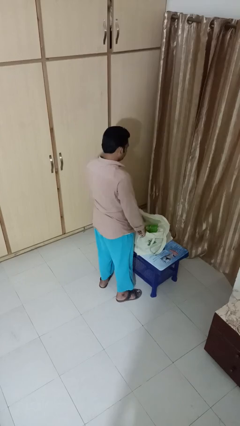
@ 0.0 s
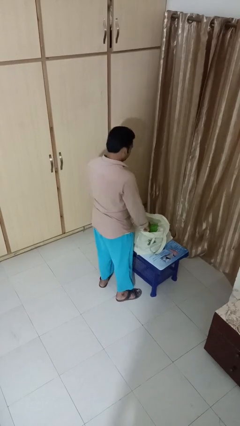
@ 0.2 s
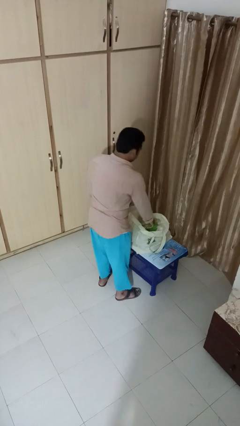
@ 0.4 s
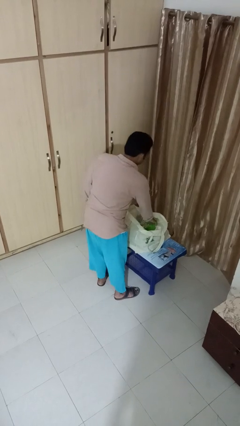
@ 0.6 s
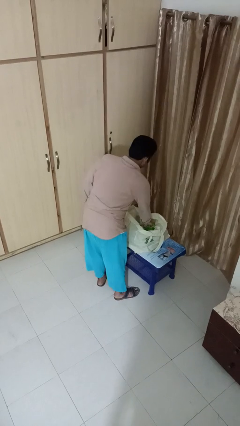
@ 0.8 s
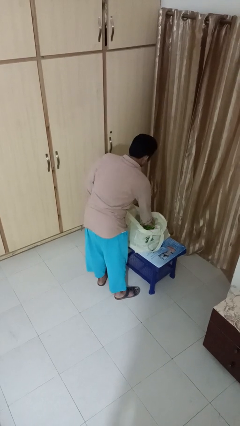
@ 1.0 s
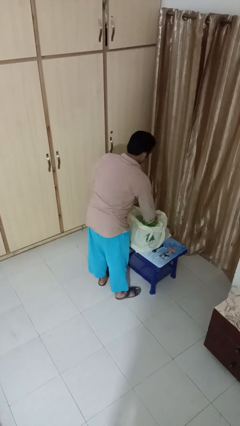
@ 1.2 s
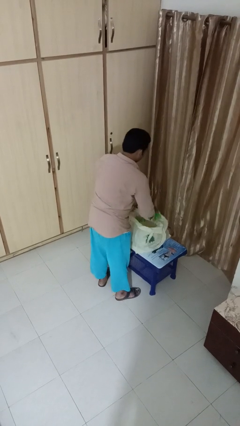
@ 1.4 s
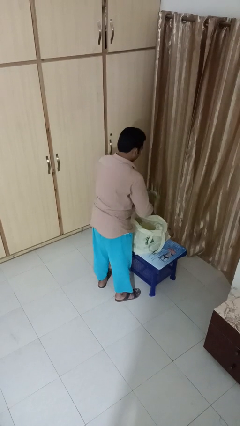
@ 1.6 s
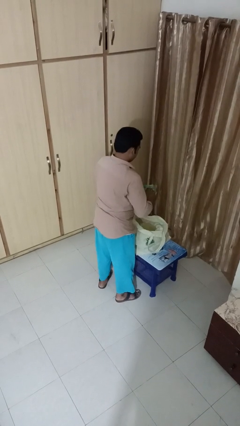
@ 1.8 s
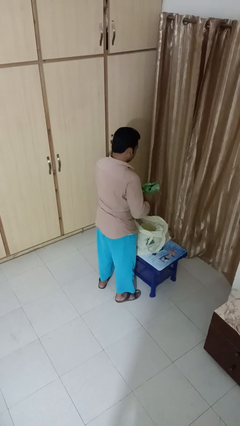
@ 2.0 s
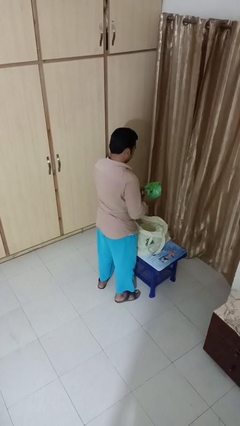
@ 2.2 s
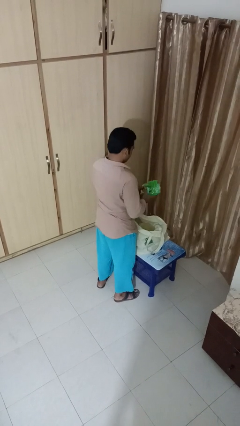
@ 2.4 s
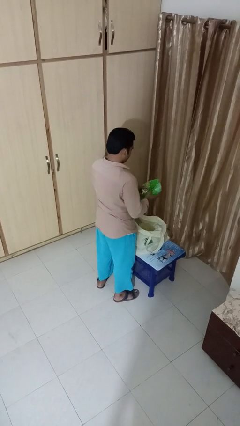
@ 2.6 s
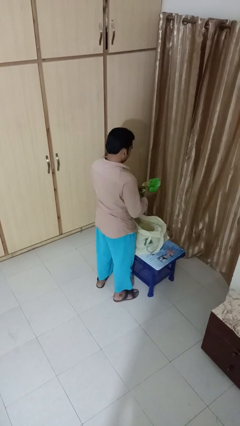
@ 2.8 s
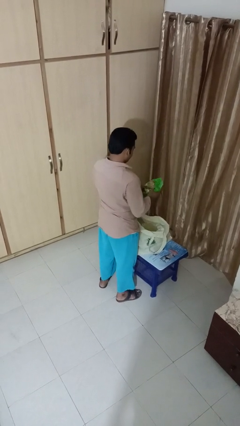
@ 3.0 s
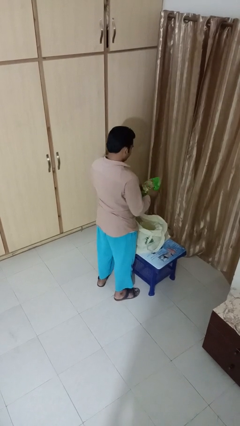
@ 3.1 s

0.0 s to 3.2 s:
person takes object from bag

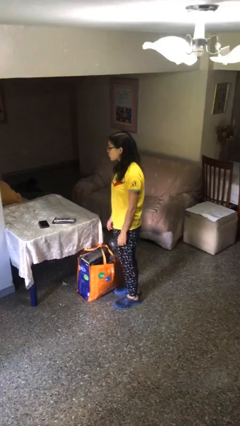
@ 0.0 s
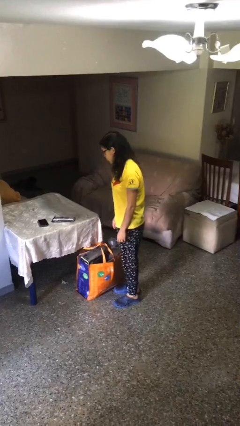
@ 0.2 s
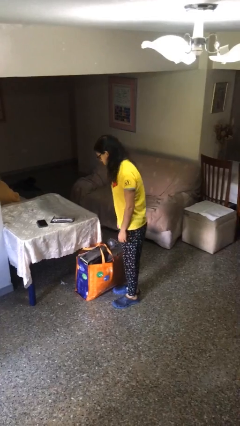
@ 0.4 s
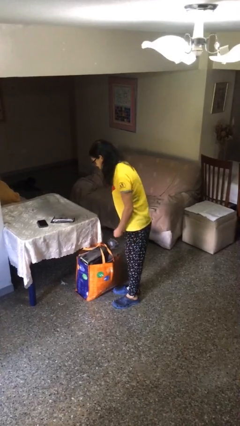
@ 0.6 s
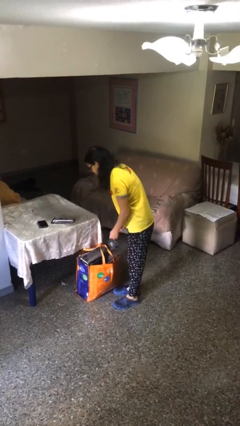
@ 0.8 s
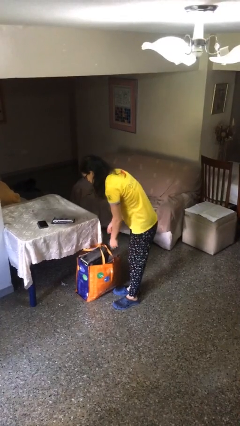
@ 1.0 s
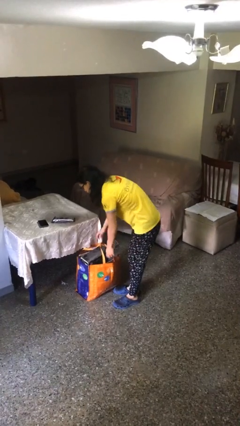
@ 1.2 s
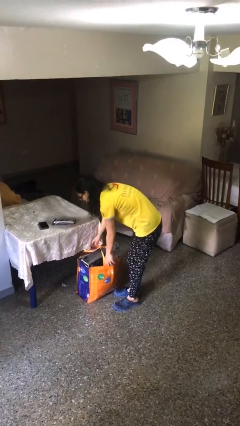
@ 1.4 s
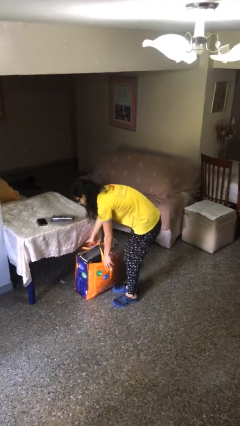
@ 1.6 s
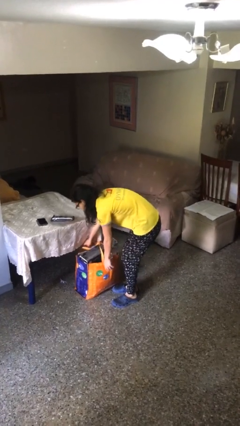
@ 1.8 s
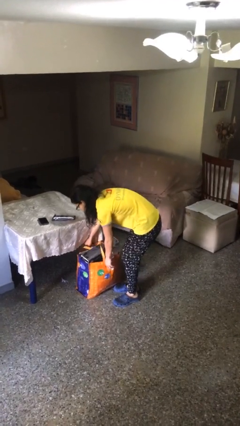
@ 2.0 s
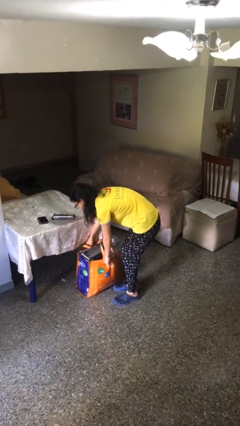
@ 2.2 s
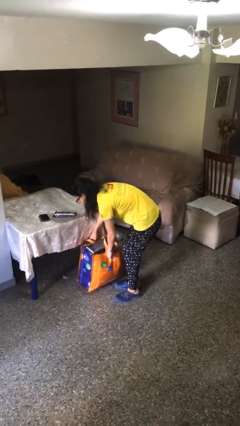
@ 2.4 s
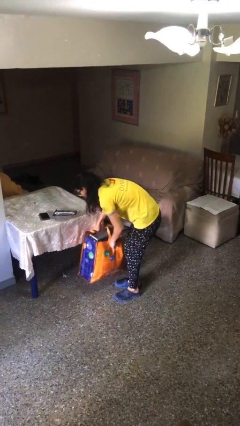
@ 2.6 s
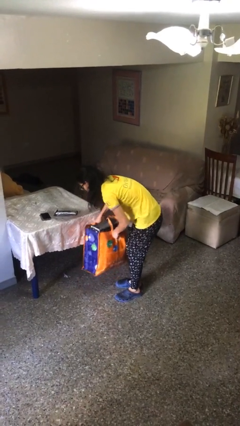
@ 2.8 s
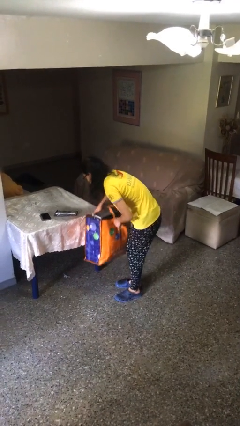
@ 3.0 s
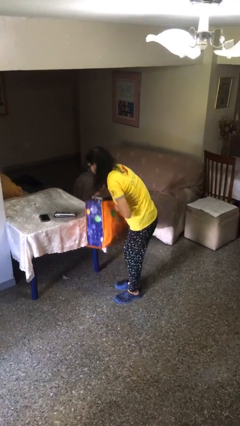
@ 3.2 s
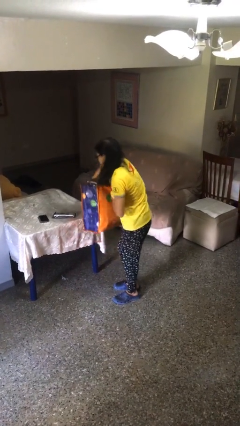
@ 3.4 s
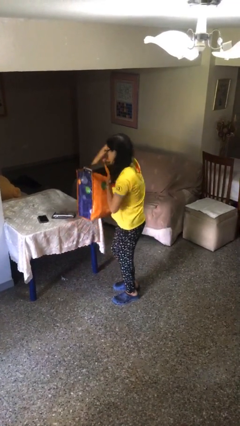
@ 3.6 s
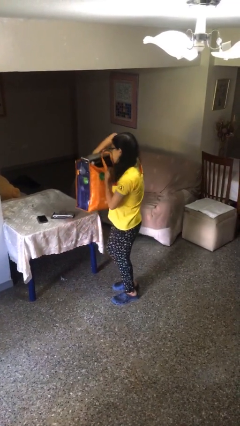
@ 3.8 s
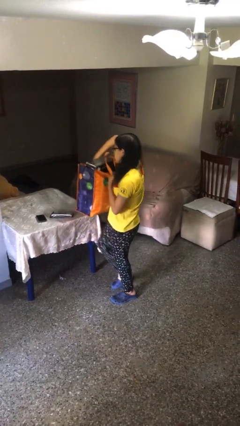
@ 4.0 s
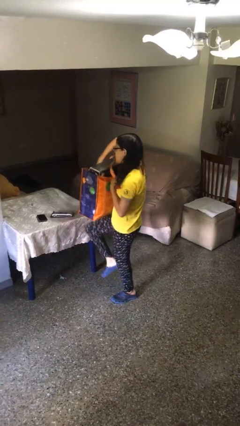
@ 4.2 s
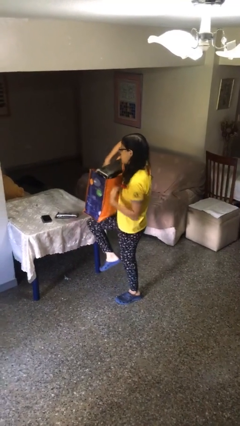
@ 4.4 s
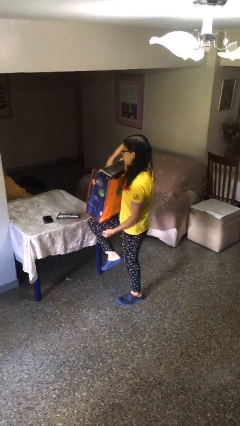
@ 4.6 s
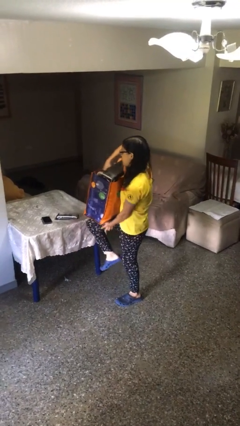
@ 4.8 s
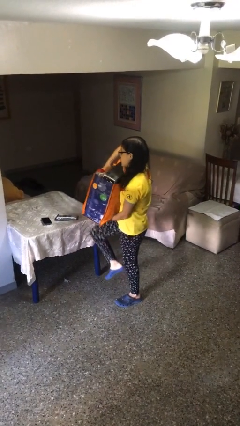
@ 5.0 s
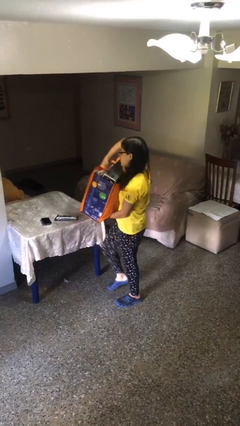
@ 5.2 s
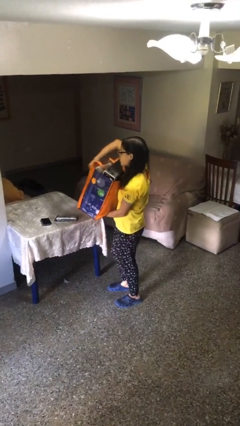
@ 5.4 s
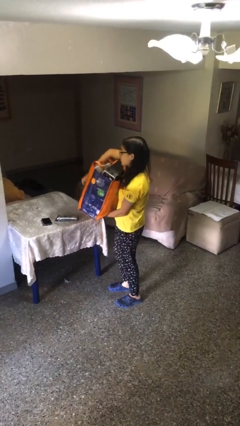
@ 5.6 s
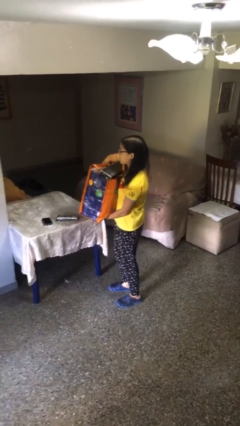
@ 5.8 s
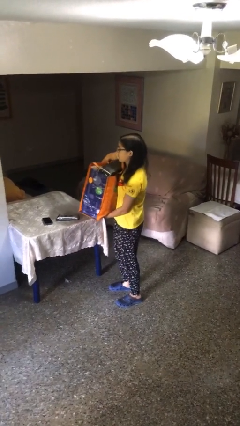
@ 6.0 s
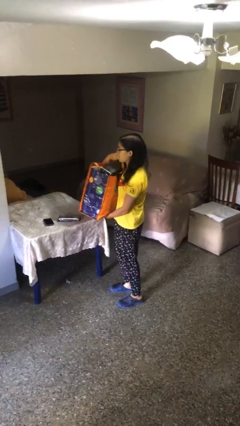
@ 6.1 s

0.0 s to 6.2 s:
person picks up object from floor

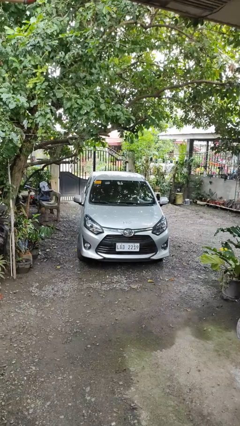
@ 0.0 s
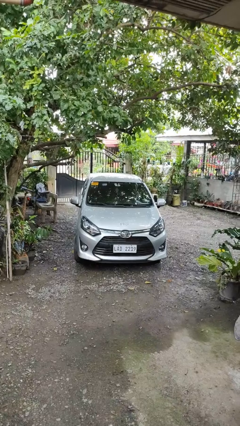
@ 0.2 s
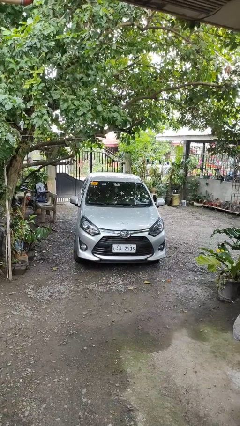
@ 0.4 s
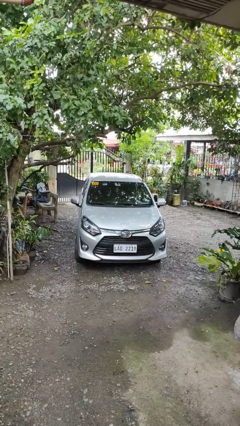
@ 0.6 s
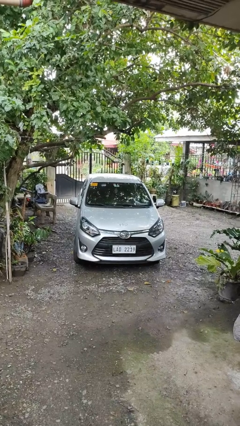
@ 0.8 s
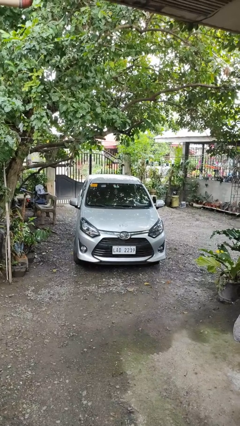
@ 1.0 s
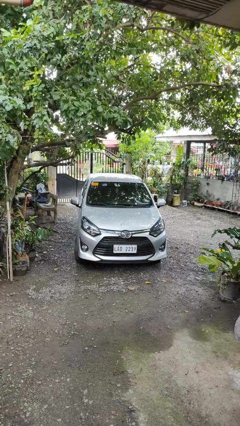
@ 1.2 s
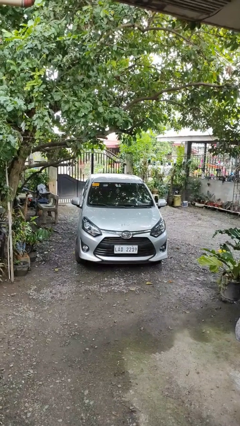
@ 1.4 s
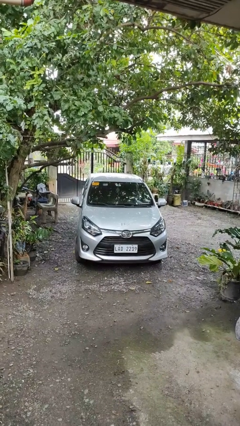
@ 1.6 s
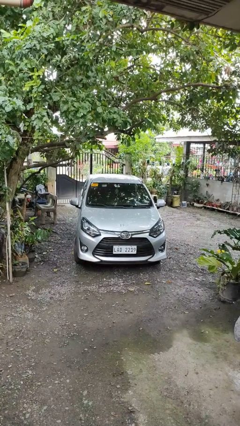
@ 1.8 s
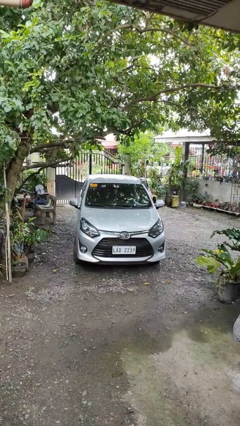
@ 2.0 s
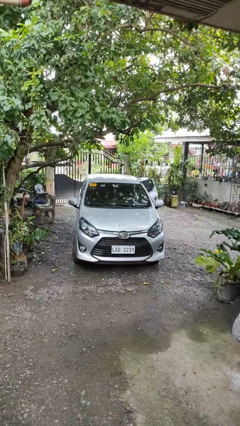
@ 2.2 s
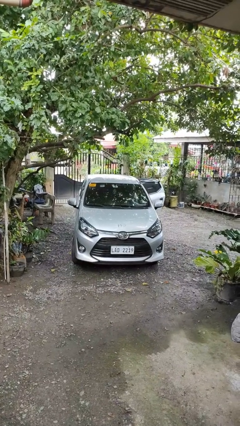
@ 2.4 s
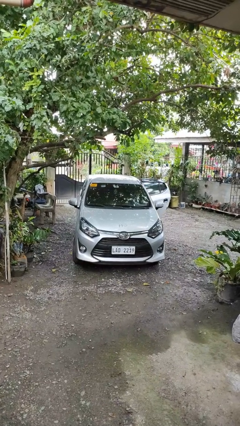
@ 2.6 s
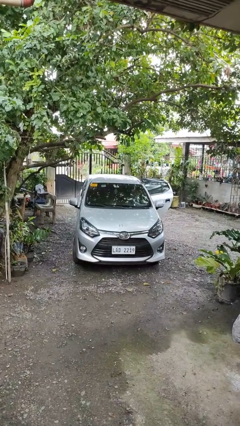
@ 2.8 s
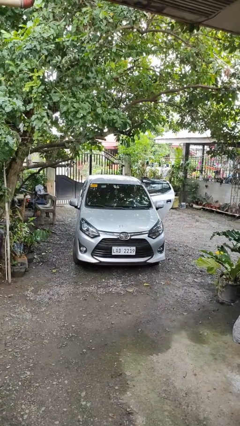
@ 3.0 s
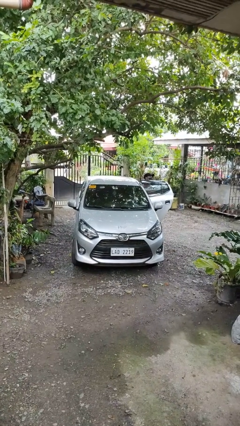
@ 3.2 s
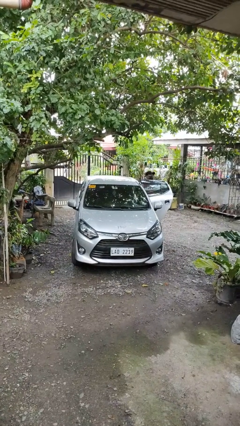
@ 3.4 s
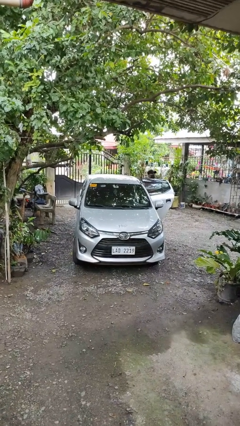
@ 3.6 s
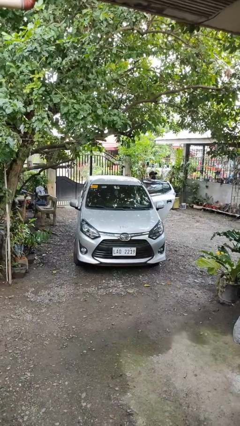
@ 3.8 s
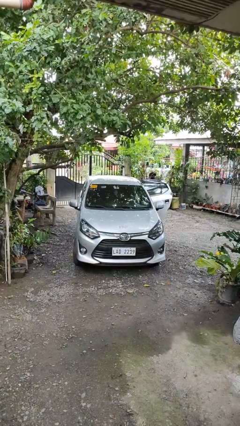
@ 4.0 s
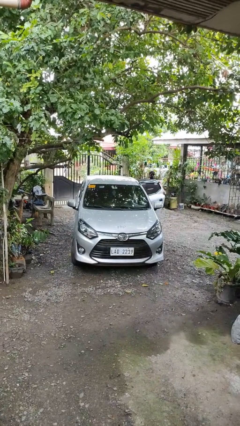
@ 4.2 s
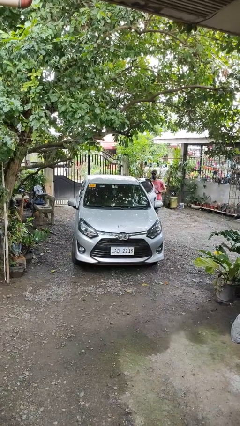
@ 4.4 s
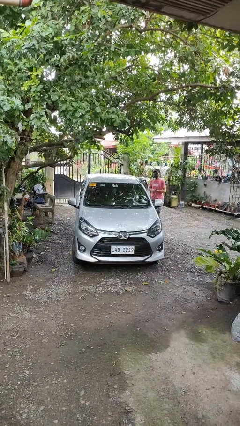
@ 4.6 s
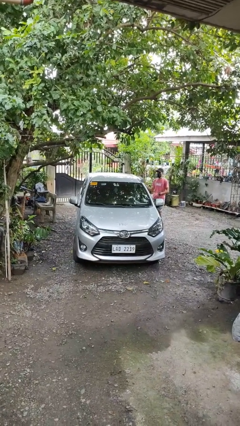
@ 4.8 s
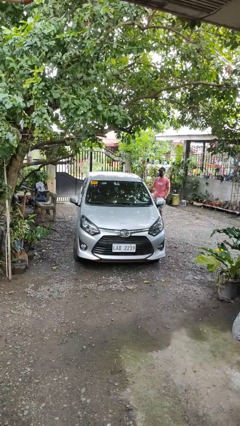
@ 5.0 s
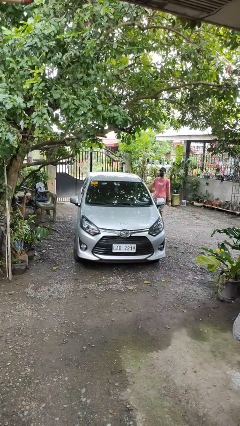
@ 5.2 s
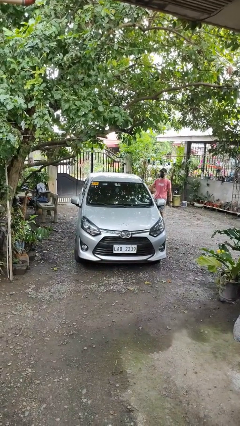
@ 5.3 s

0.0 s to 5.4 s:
car drops off person

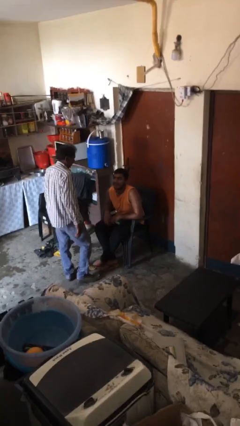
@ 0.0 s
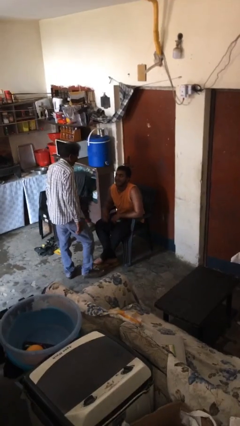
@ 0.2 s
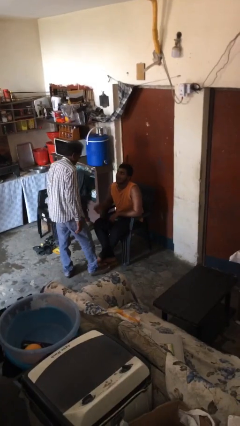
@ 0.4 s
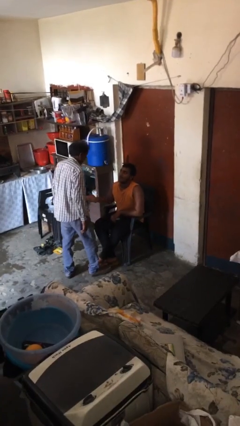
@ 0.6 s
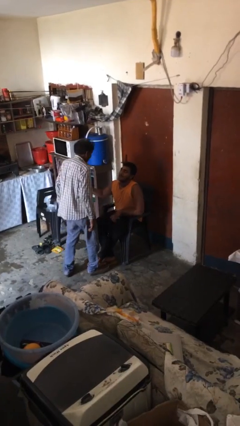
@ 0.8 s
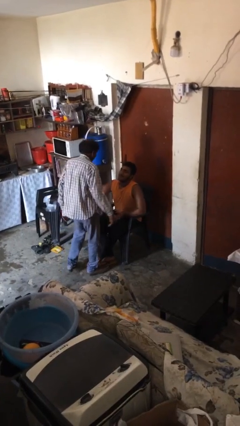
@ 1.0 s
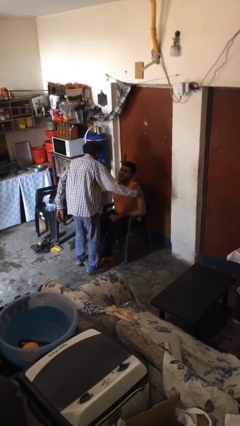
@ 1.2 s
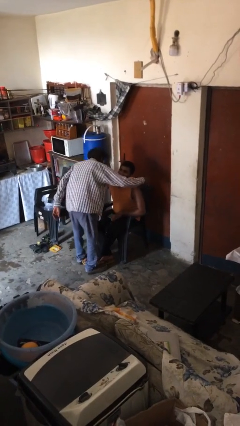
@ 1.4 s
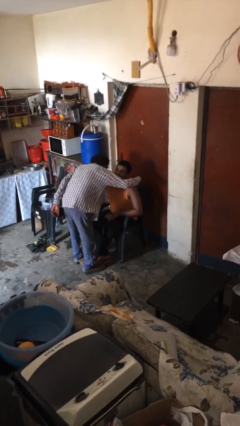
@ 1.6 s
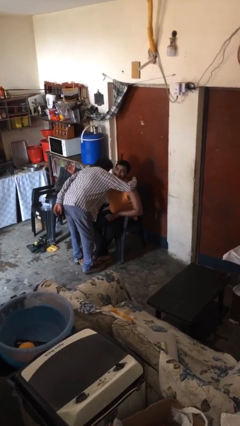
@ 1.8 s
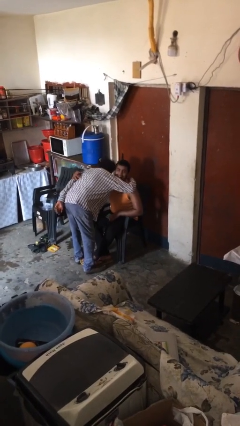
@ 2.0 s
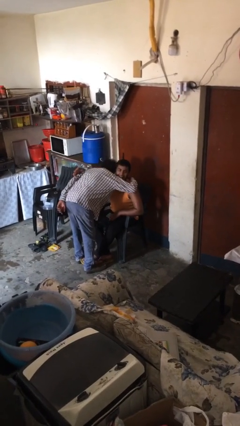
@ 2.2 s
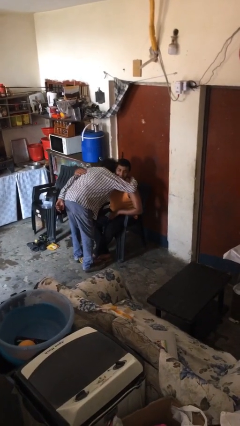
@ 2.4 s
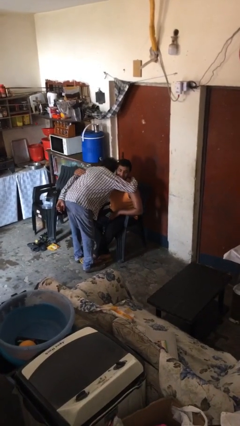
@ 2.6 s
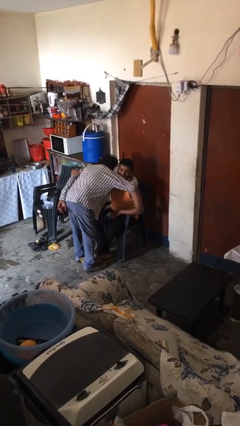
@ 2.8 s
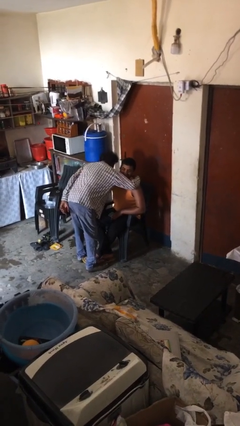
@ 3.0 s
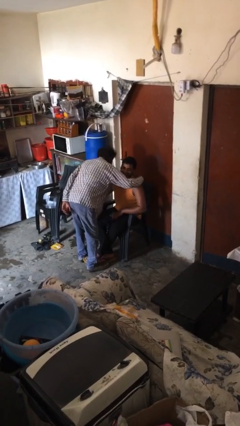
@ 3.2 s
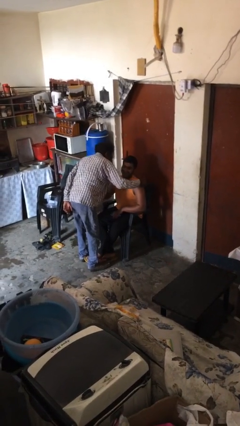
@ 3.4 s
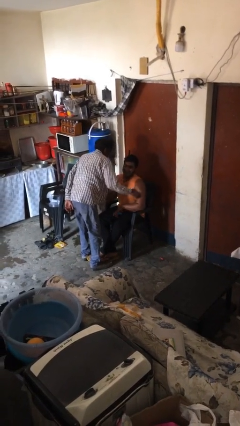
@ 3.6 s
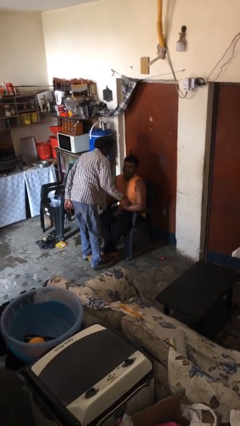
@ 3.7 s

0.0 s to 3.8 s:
person embraces person
